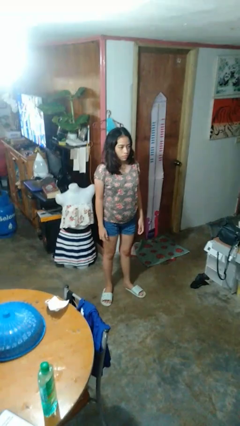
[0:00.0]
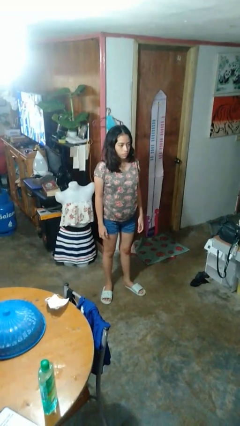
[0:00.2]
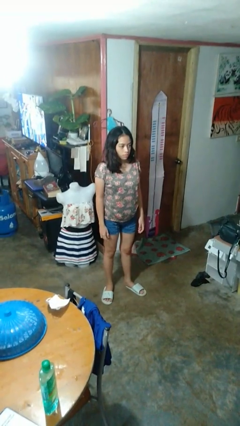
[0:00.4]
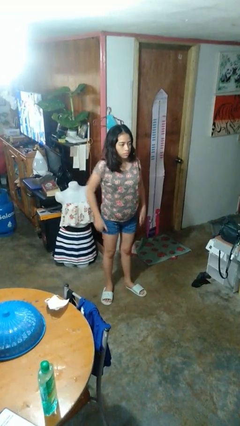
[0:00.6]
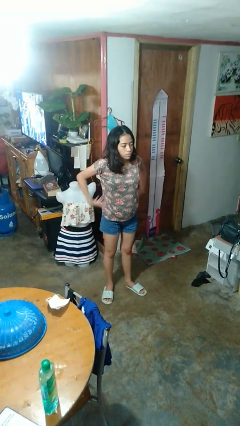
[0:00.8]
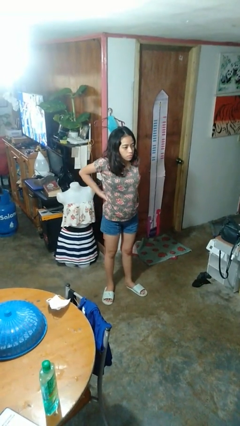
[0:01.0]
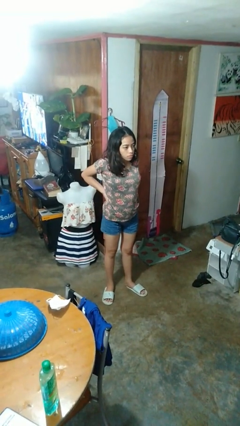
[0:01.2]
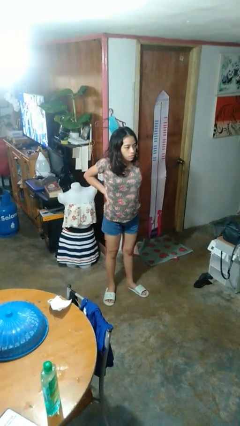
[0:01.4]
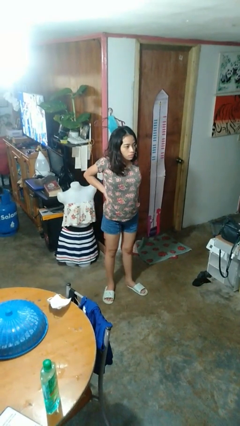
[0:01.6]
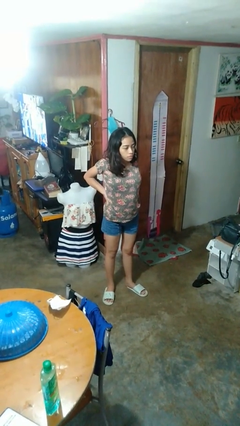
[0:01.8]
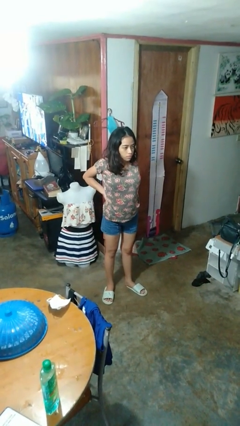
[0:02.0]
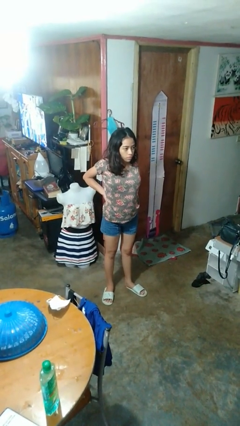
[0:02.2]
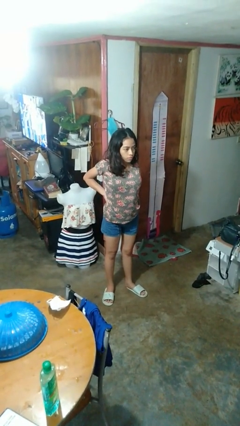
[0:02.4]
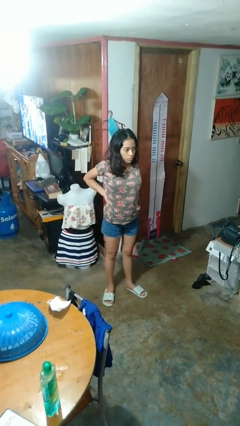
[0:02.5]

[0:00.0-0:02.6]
person stretches back

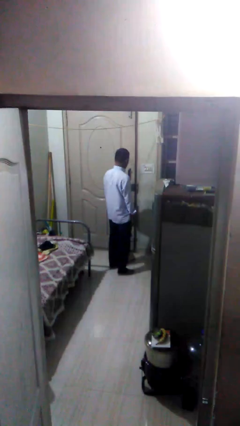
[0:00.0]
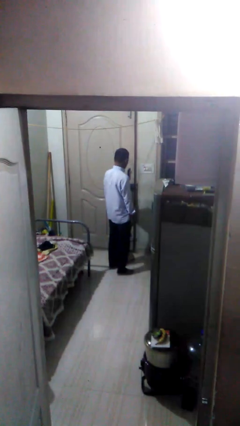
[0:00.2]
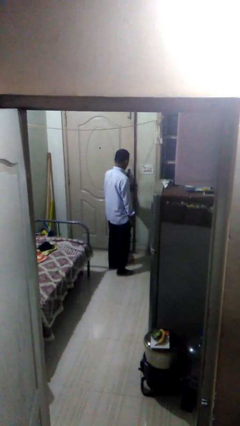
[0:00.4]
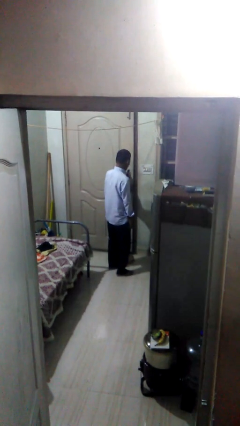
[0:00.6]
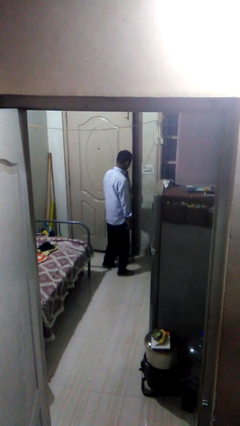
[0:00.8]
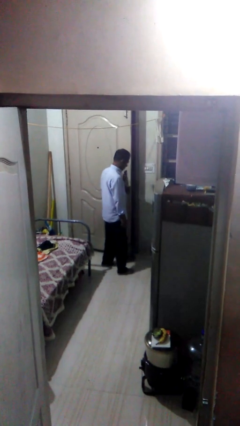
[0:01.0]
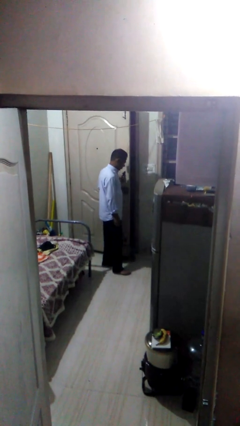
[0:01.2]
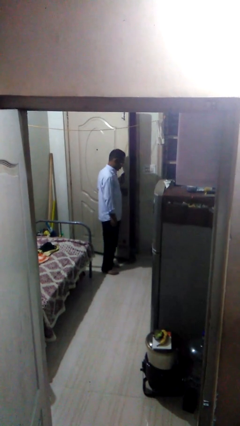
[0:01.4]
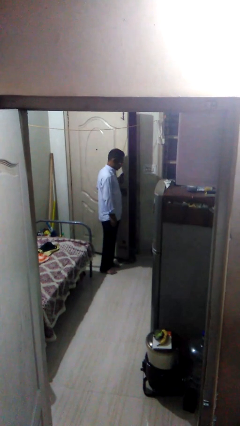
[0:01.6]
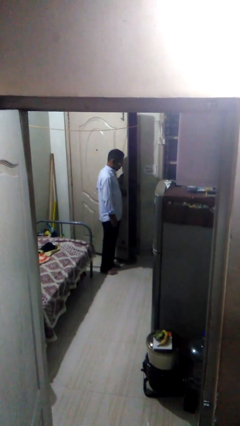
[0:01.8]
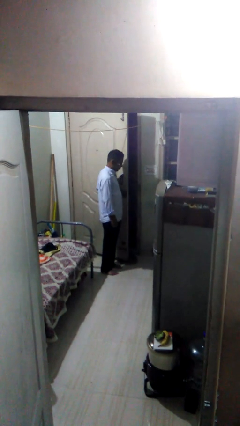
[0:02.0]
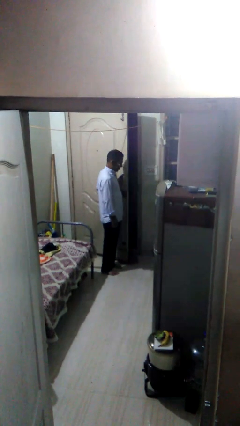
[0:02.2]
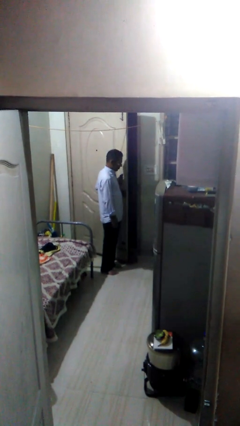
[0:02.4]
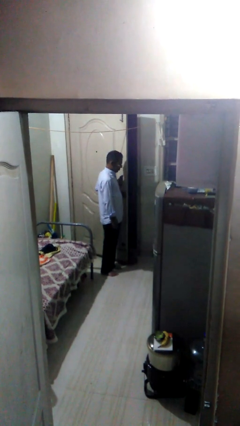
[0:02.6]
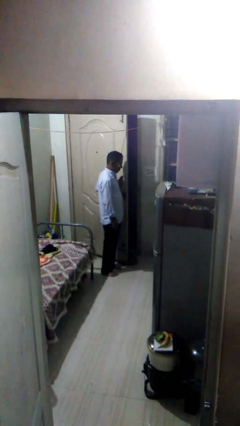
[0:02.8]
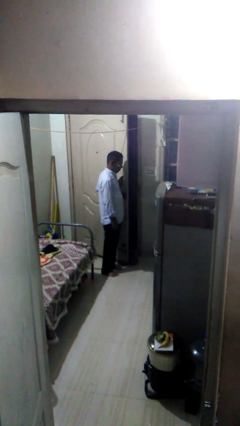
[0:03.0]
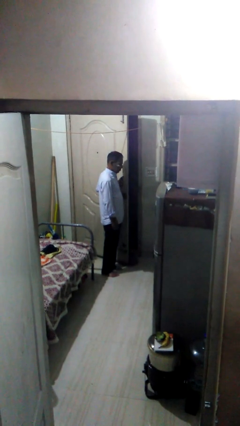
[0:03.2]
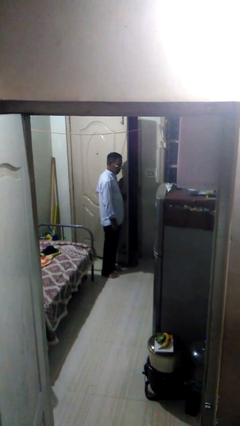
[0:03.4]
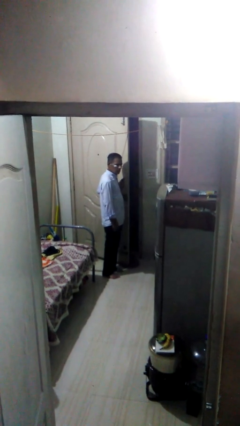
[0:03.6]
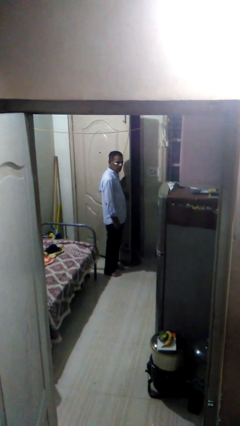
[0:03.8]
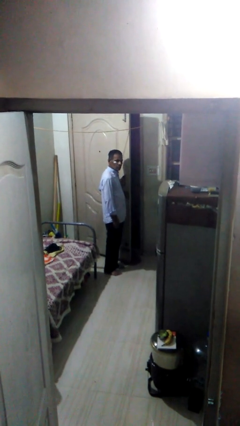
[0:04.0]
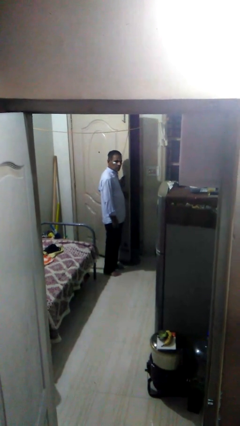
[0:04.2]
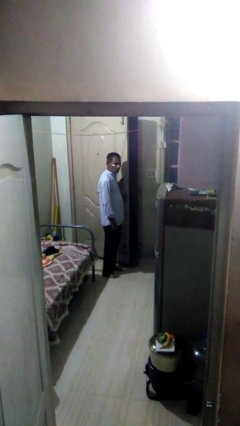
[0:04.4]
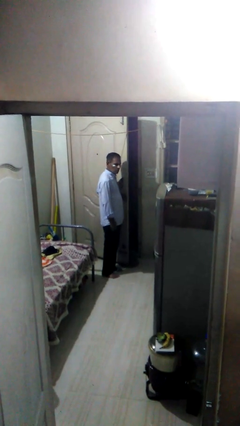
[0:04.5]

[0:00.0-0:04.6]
person opens facility door

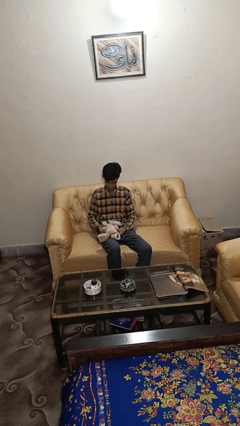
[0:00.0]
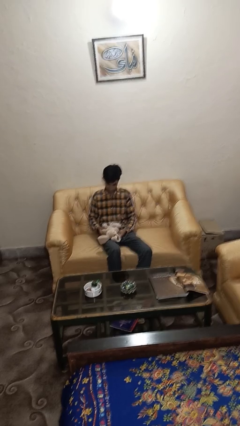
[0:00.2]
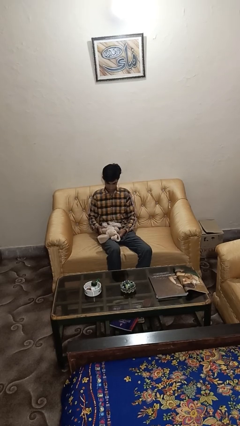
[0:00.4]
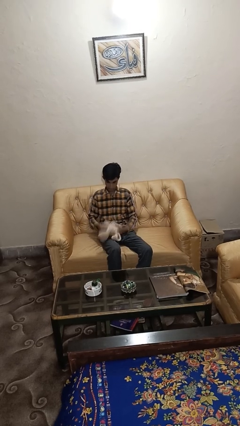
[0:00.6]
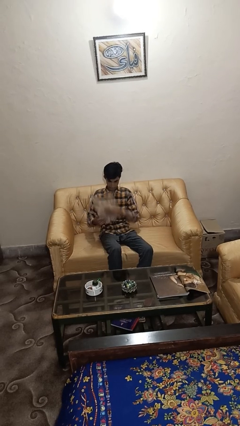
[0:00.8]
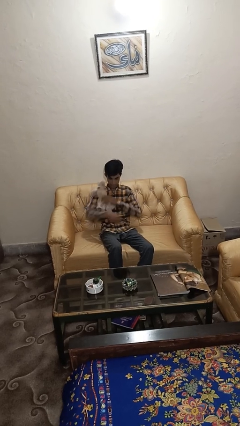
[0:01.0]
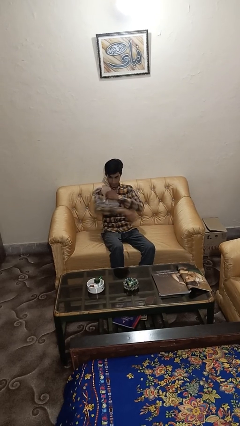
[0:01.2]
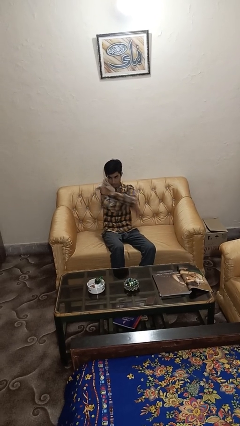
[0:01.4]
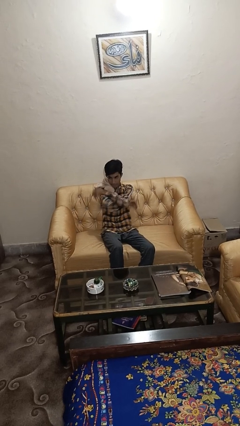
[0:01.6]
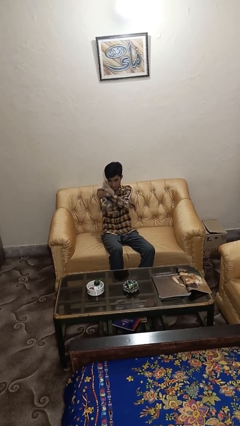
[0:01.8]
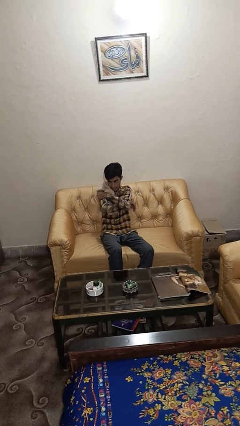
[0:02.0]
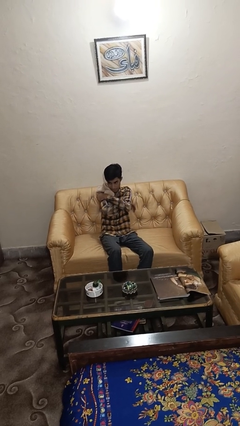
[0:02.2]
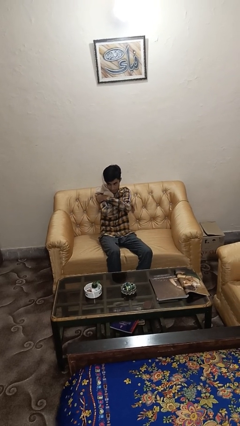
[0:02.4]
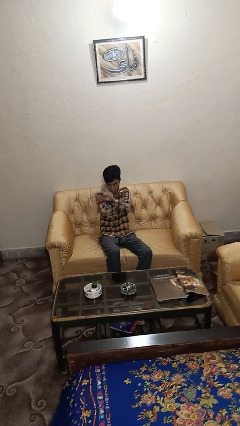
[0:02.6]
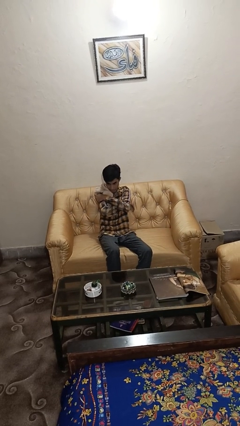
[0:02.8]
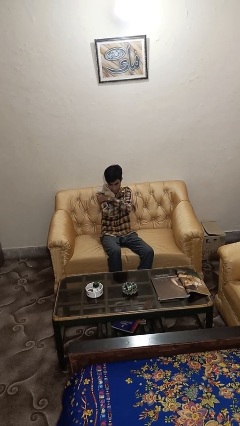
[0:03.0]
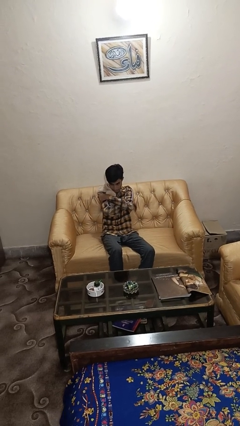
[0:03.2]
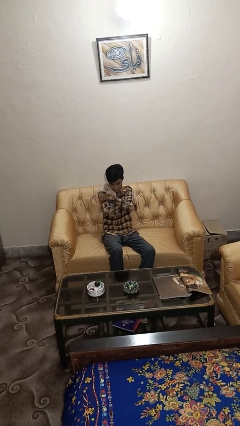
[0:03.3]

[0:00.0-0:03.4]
person hugs stuffed animal

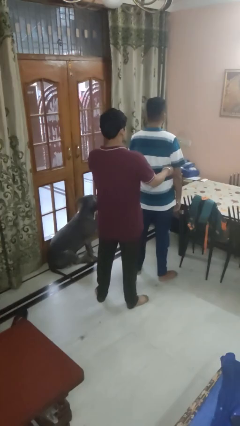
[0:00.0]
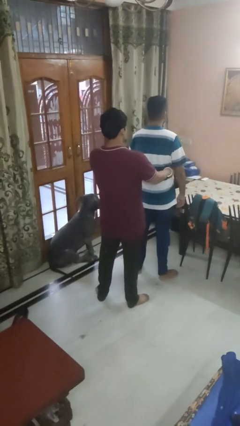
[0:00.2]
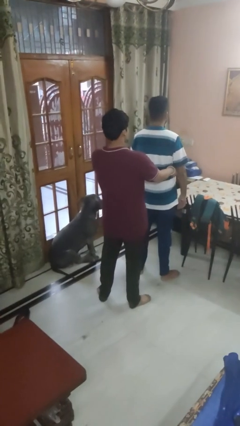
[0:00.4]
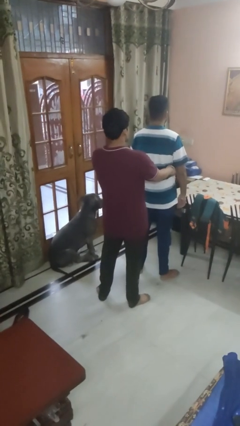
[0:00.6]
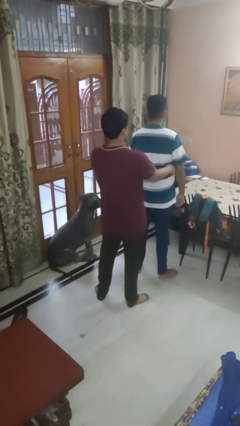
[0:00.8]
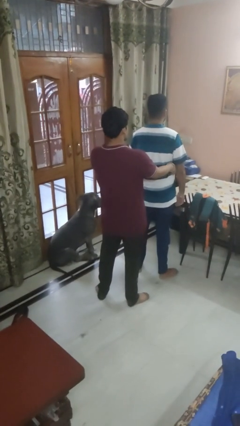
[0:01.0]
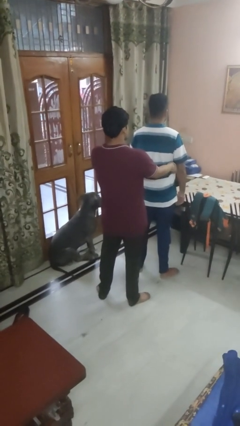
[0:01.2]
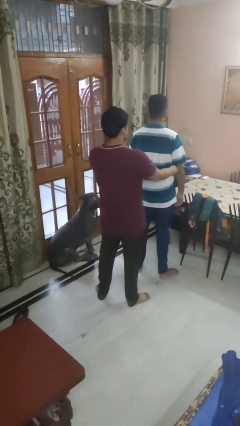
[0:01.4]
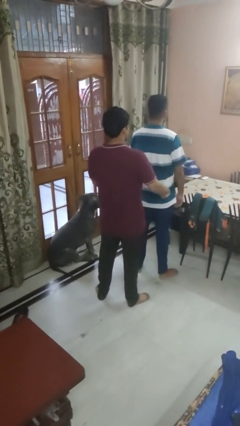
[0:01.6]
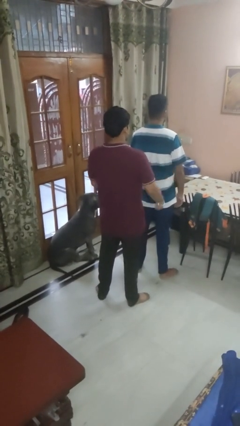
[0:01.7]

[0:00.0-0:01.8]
person tickles person

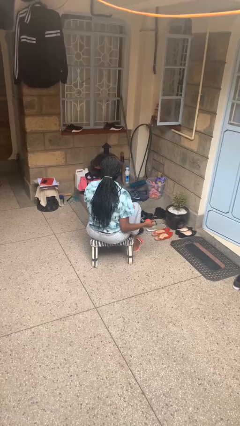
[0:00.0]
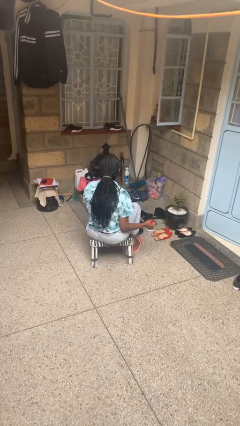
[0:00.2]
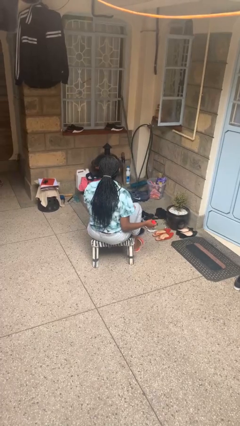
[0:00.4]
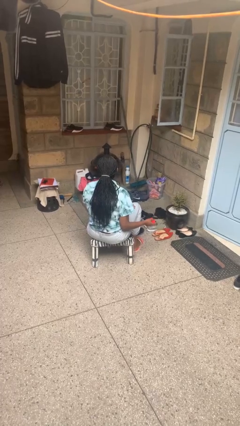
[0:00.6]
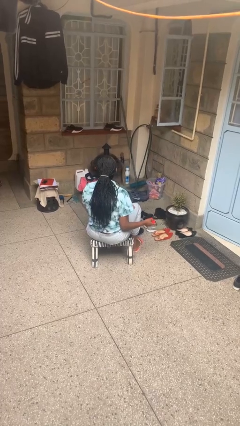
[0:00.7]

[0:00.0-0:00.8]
person drops object

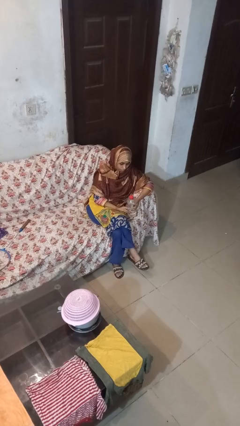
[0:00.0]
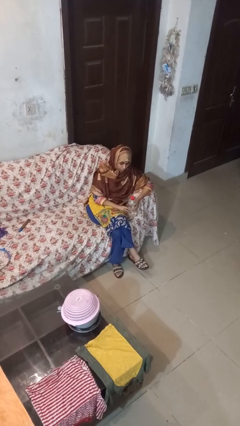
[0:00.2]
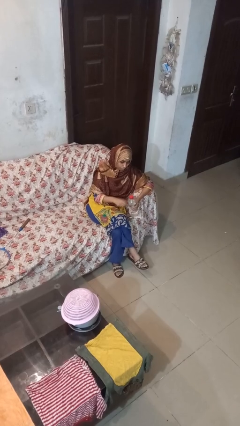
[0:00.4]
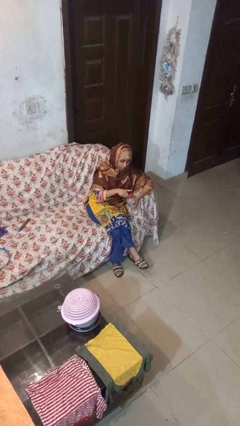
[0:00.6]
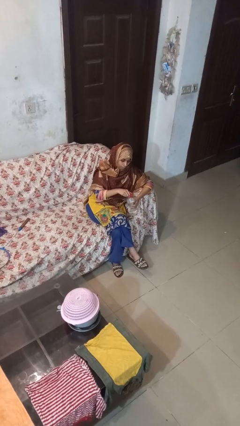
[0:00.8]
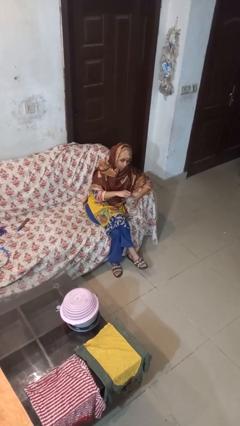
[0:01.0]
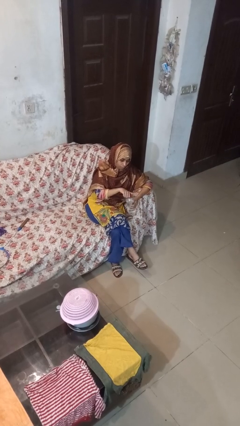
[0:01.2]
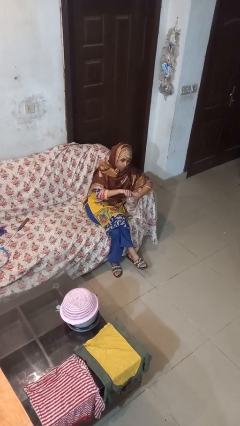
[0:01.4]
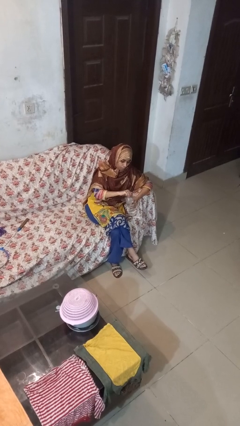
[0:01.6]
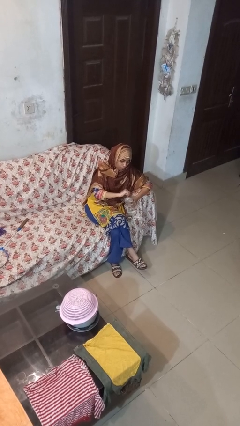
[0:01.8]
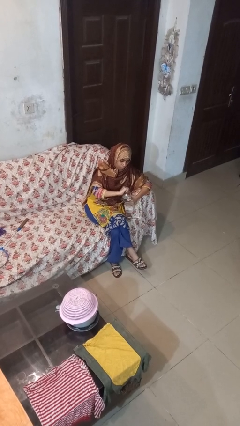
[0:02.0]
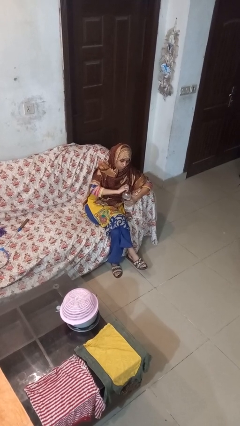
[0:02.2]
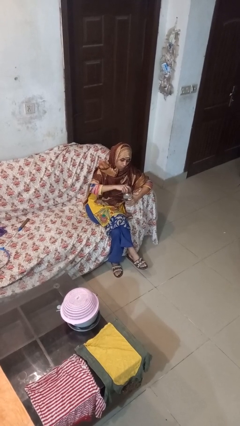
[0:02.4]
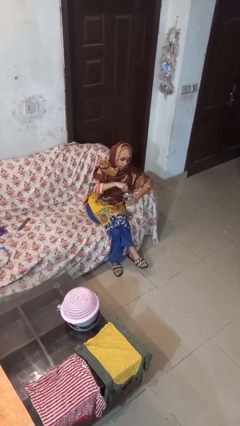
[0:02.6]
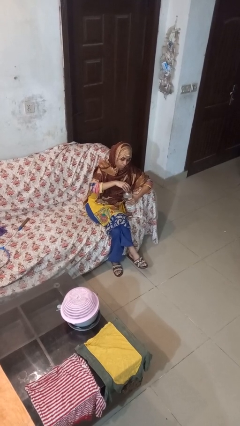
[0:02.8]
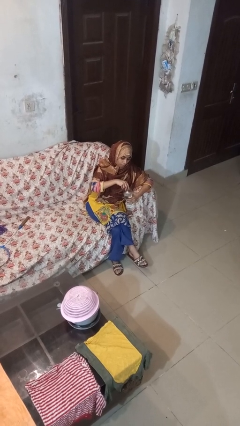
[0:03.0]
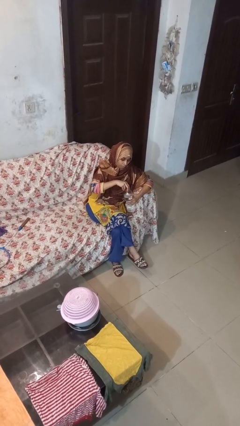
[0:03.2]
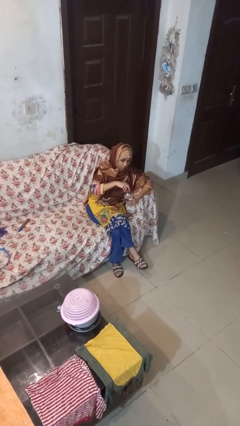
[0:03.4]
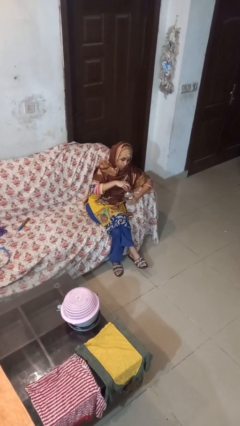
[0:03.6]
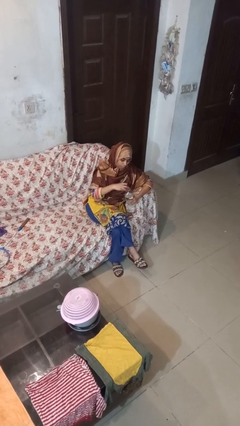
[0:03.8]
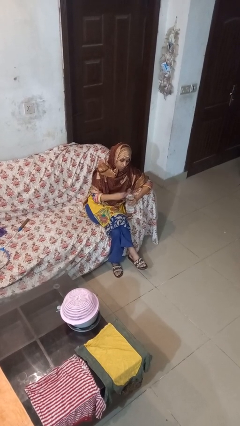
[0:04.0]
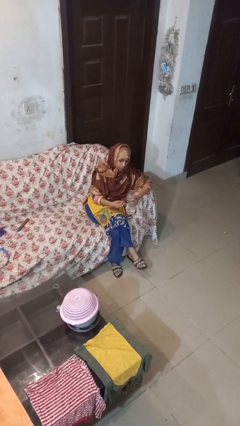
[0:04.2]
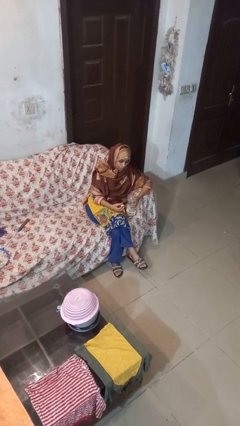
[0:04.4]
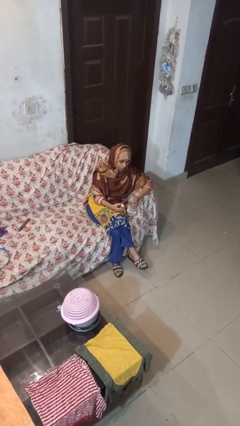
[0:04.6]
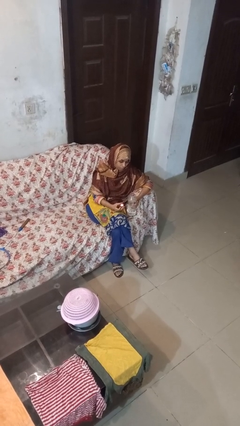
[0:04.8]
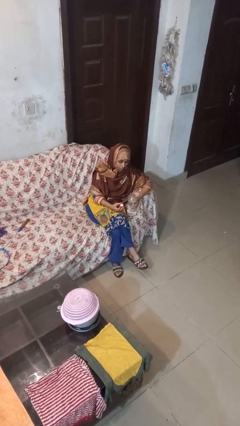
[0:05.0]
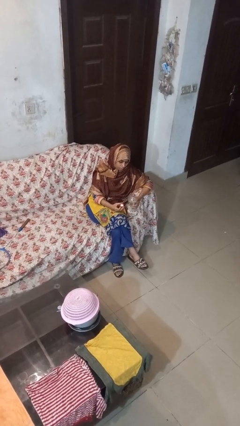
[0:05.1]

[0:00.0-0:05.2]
person unscrews lid from bottle
